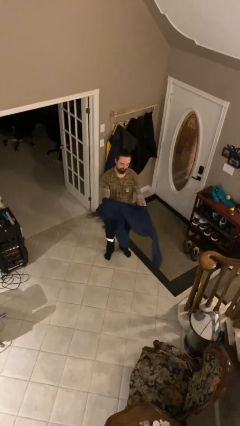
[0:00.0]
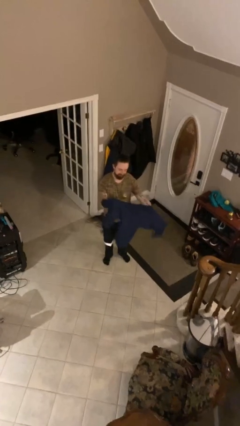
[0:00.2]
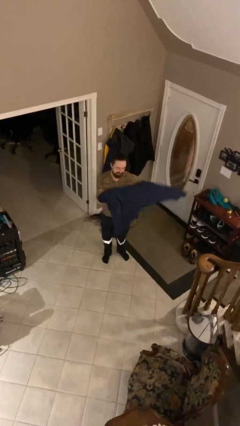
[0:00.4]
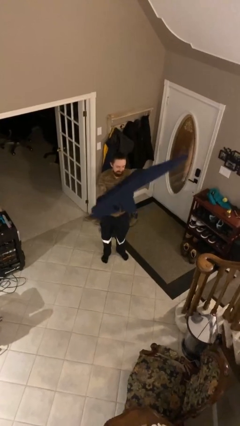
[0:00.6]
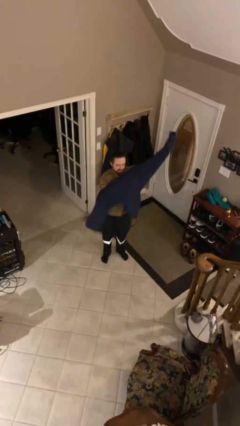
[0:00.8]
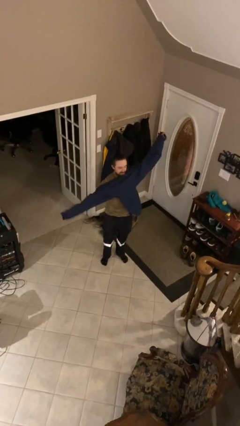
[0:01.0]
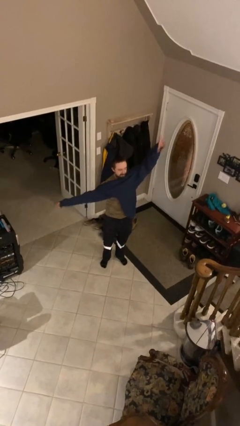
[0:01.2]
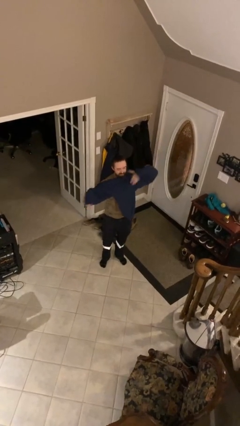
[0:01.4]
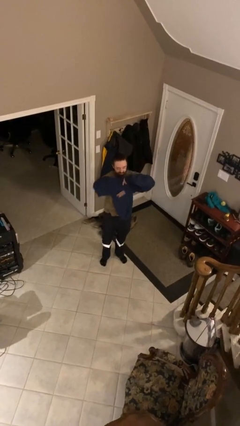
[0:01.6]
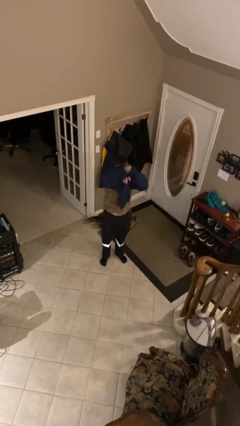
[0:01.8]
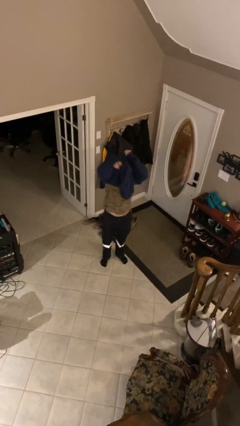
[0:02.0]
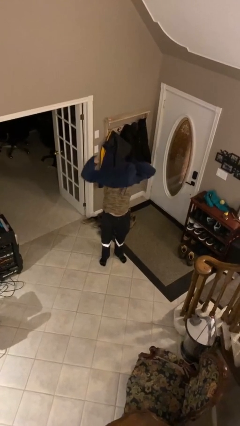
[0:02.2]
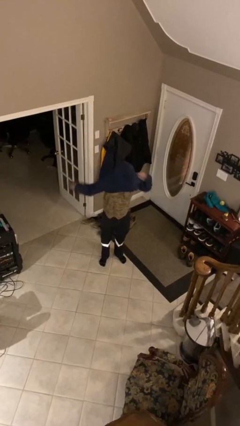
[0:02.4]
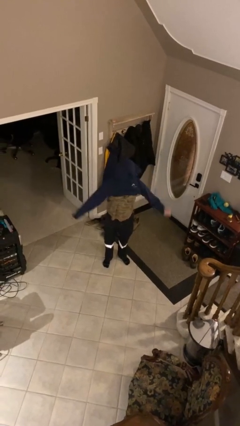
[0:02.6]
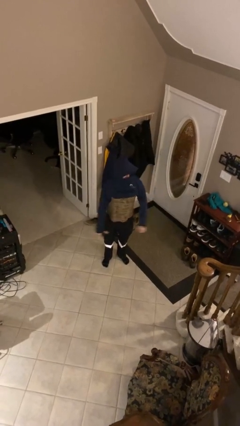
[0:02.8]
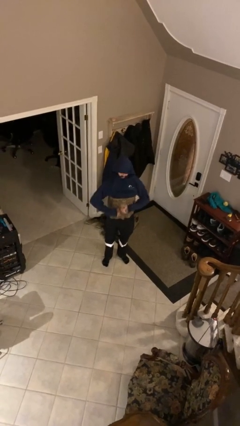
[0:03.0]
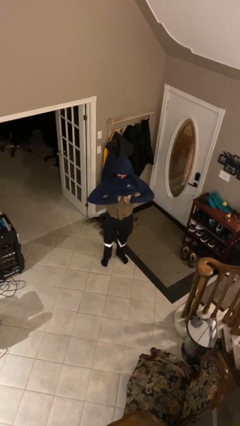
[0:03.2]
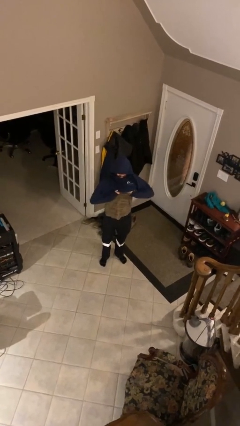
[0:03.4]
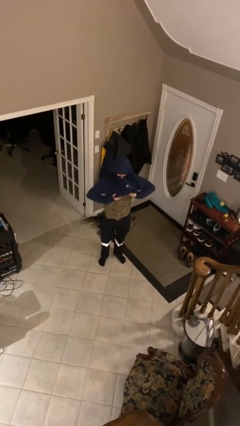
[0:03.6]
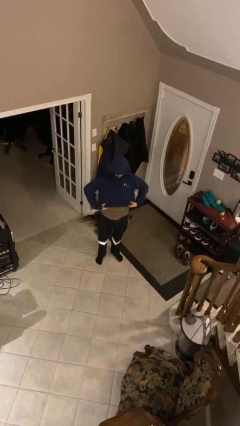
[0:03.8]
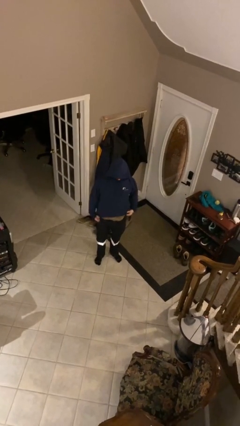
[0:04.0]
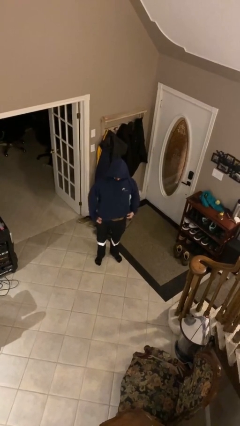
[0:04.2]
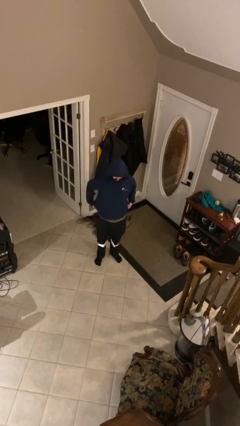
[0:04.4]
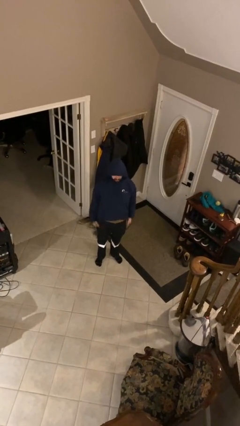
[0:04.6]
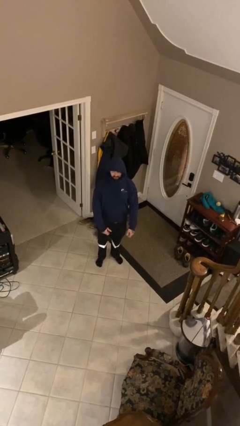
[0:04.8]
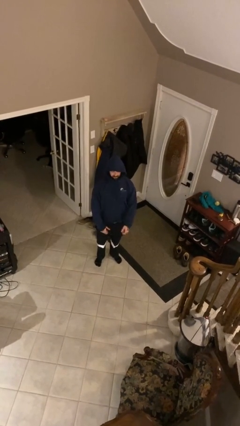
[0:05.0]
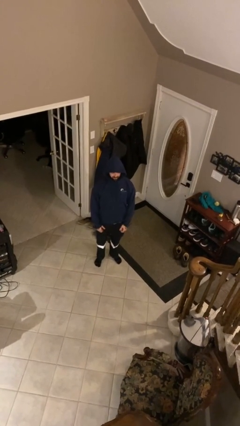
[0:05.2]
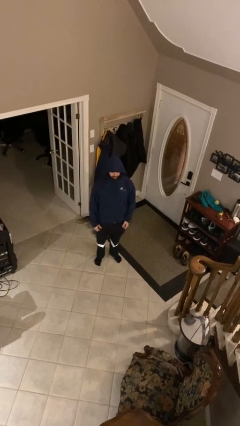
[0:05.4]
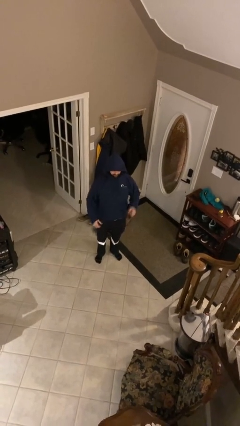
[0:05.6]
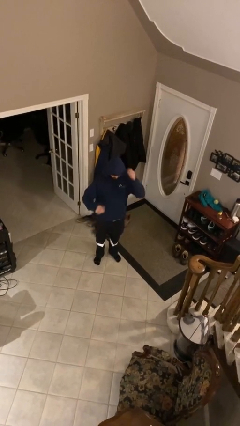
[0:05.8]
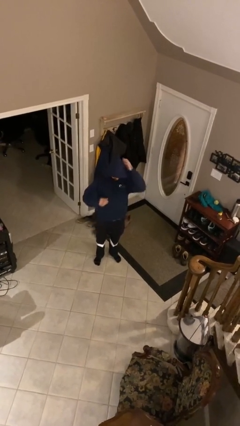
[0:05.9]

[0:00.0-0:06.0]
person puts on hoodie

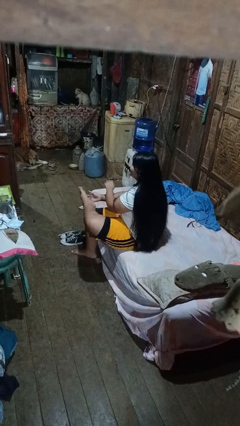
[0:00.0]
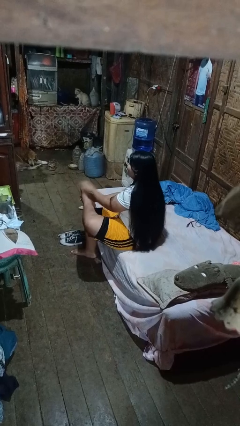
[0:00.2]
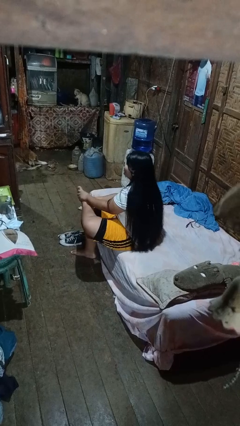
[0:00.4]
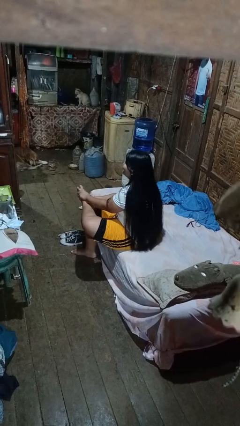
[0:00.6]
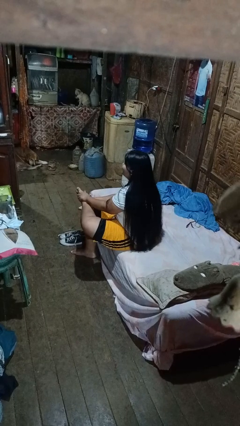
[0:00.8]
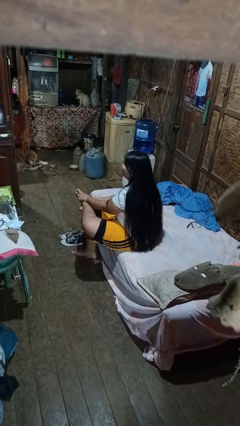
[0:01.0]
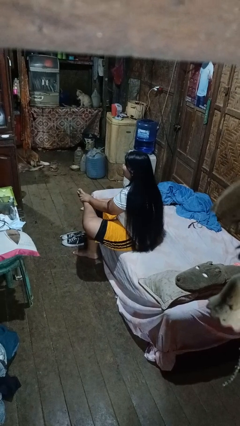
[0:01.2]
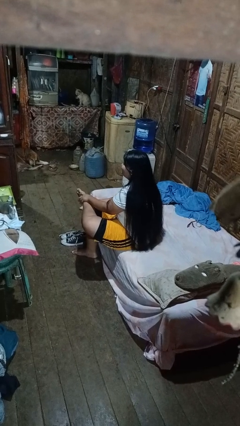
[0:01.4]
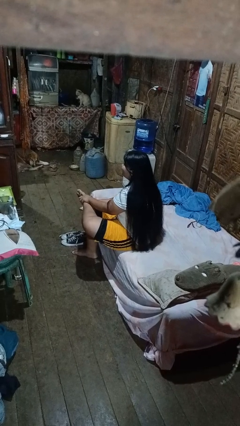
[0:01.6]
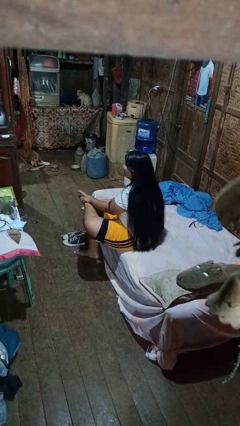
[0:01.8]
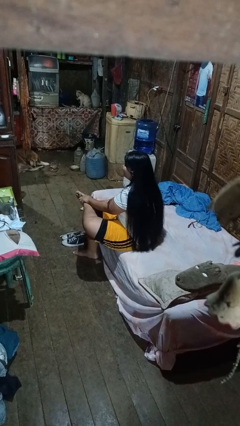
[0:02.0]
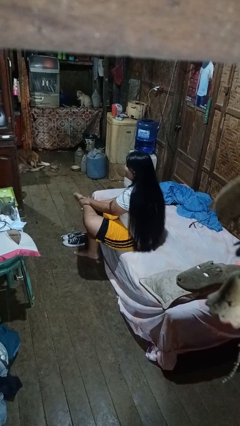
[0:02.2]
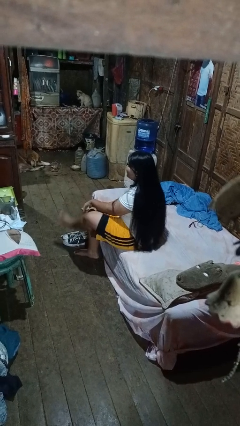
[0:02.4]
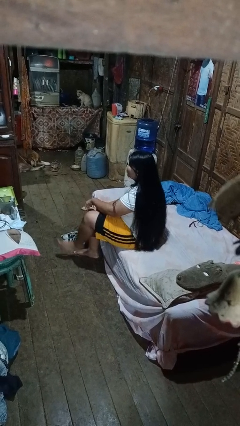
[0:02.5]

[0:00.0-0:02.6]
person rubs foot

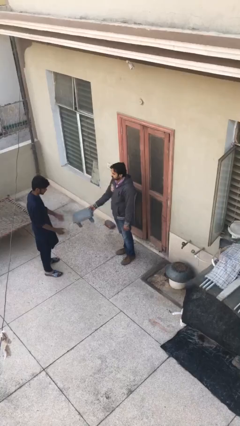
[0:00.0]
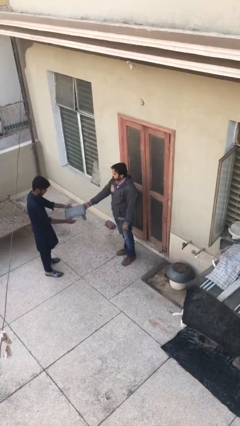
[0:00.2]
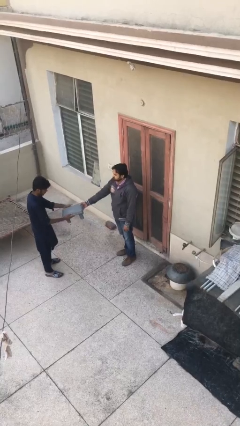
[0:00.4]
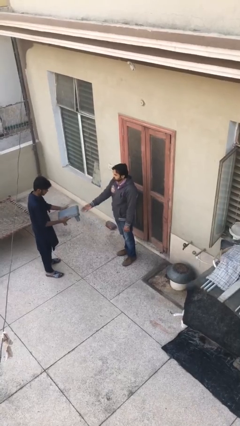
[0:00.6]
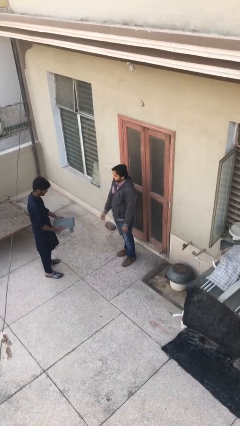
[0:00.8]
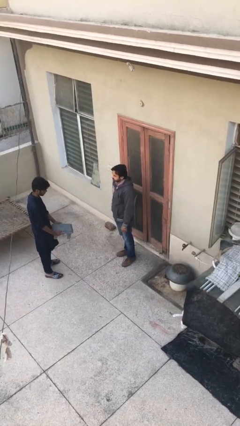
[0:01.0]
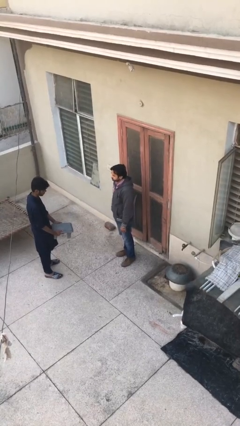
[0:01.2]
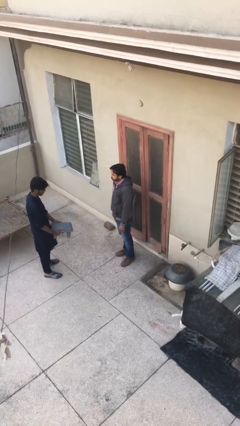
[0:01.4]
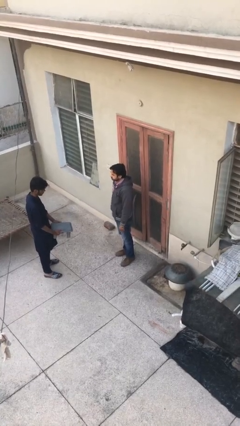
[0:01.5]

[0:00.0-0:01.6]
person transfers object to person

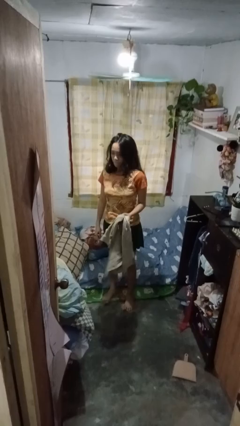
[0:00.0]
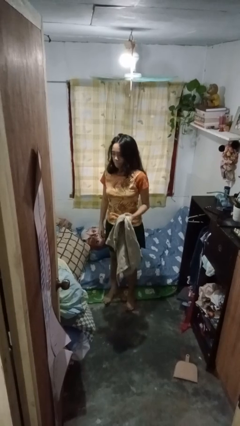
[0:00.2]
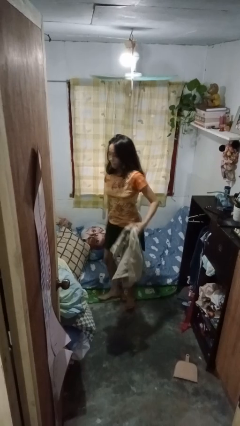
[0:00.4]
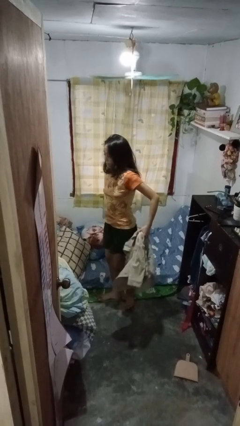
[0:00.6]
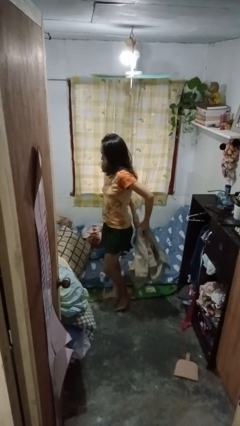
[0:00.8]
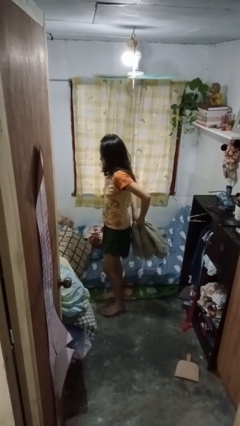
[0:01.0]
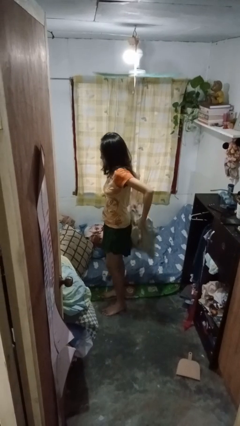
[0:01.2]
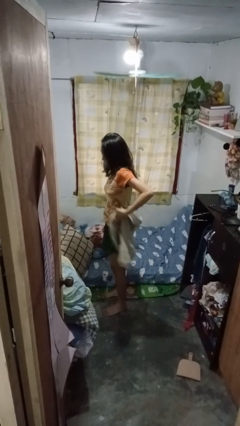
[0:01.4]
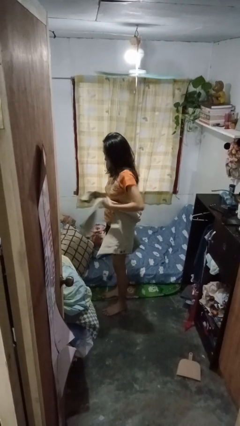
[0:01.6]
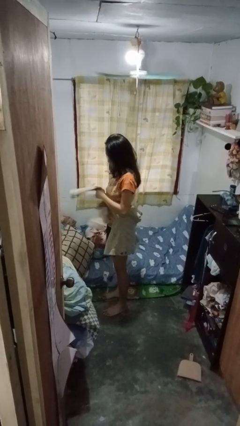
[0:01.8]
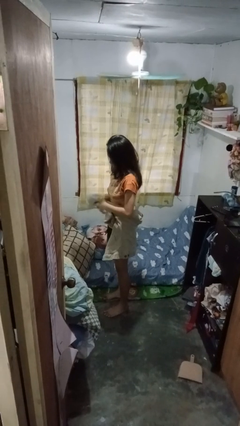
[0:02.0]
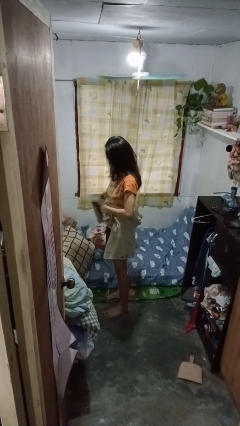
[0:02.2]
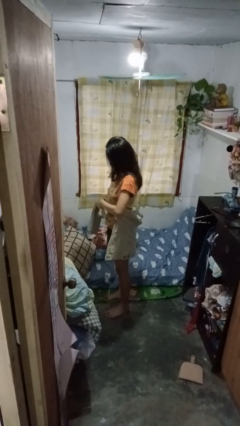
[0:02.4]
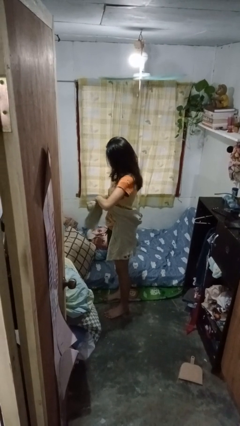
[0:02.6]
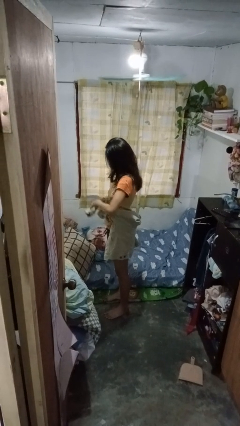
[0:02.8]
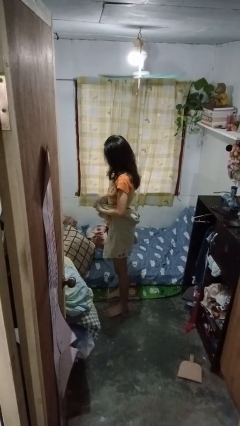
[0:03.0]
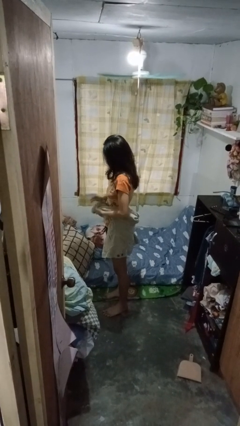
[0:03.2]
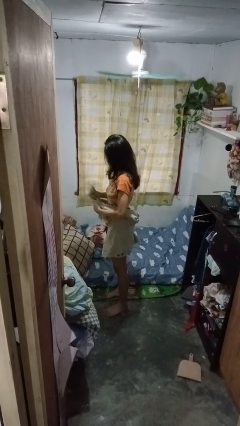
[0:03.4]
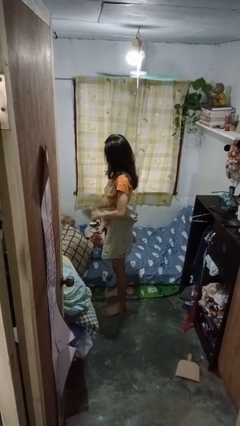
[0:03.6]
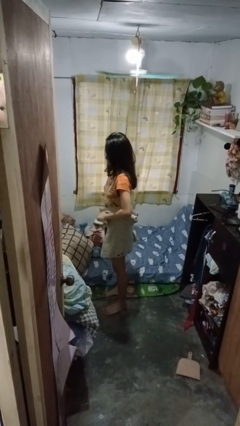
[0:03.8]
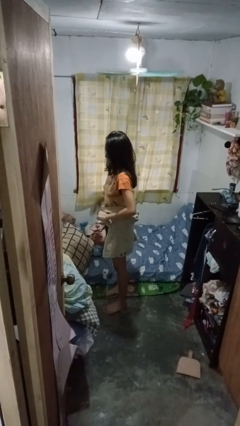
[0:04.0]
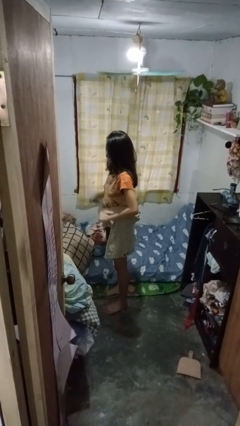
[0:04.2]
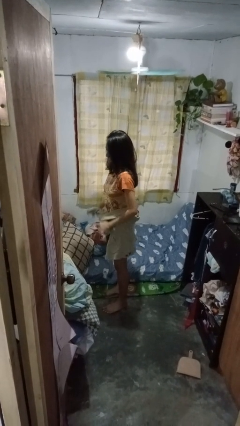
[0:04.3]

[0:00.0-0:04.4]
person ties jacket around waist

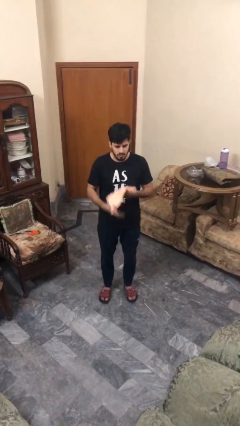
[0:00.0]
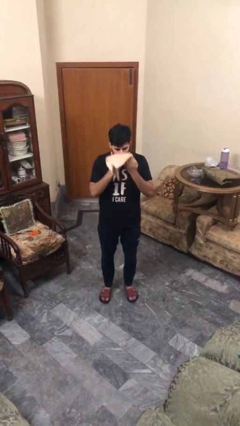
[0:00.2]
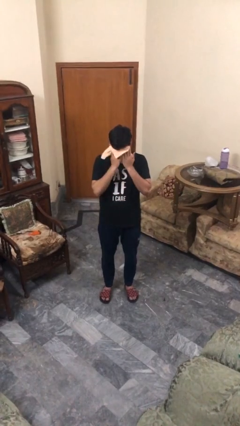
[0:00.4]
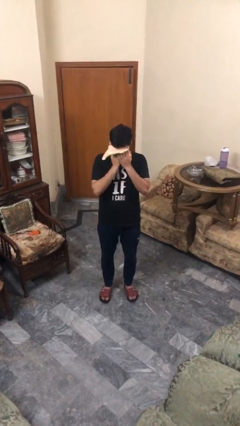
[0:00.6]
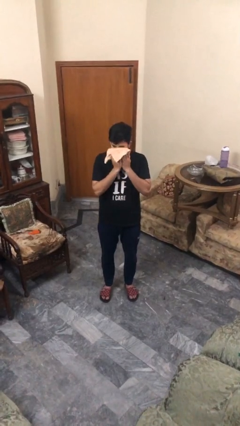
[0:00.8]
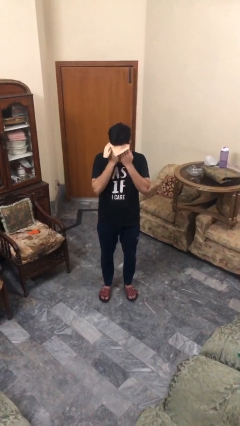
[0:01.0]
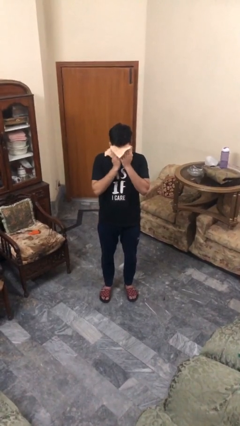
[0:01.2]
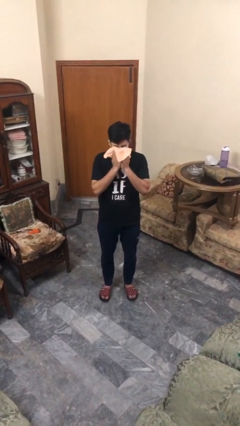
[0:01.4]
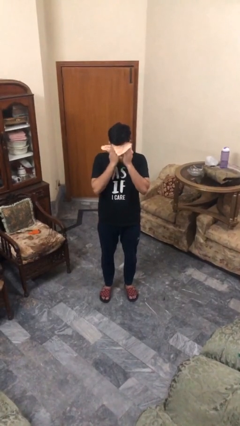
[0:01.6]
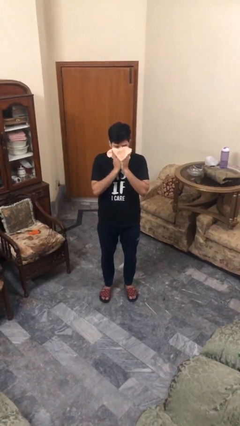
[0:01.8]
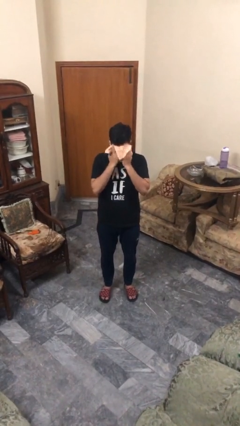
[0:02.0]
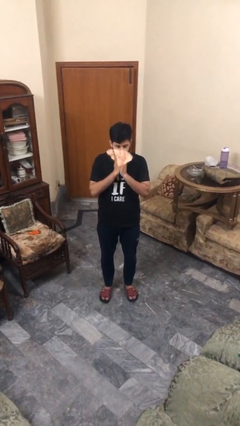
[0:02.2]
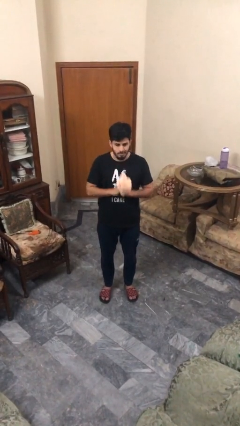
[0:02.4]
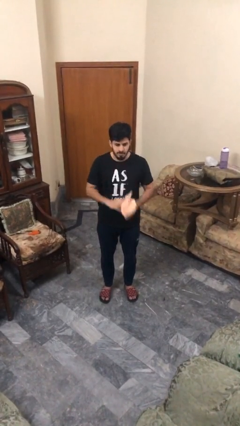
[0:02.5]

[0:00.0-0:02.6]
person wipes mouth with napkin

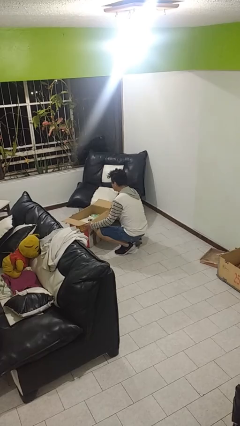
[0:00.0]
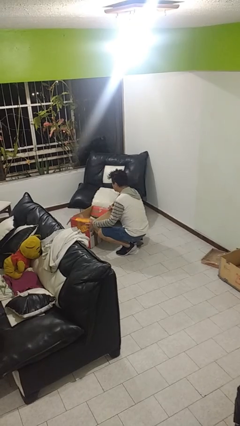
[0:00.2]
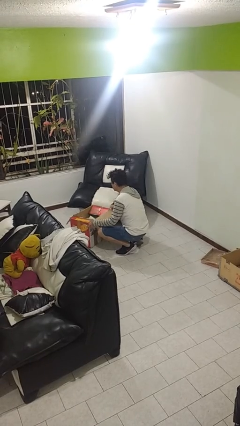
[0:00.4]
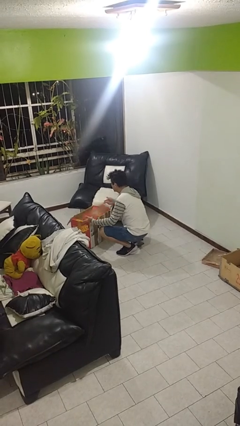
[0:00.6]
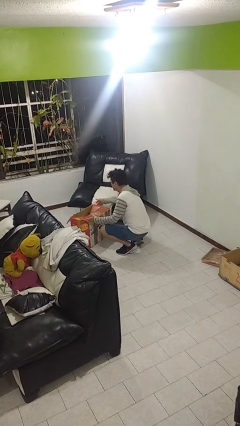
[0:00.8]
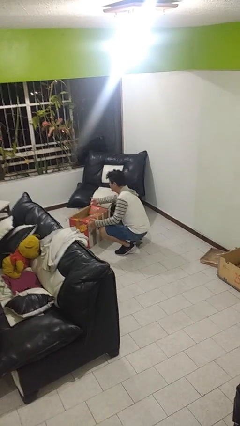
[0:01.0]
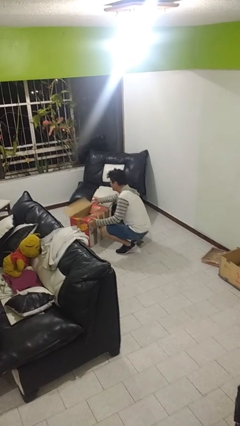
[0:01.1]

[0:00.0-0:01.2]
person closes box
